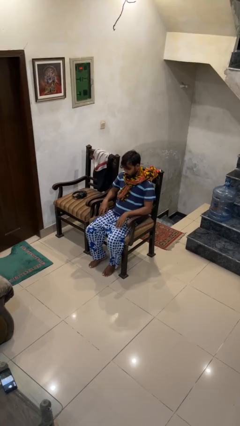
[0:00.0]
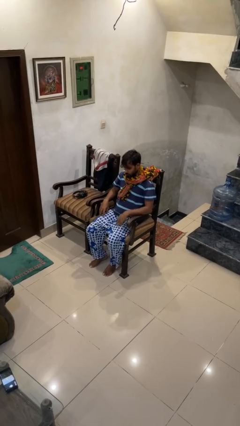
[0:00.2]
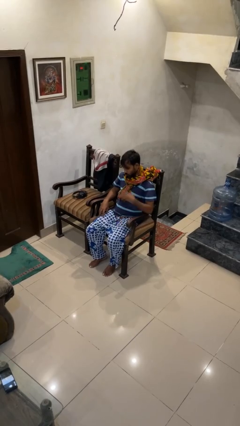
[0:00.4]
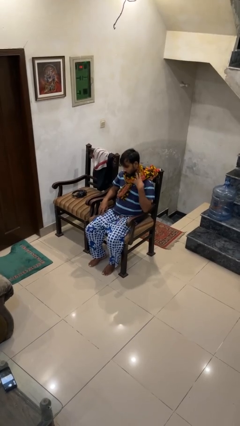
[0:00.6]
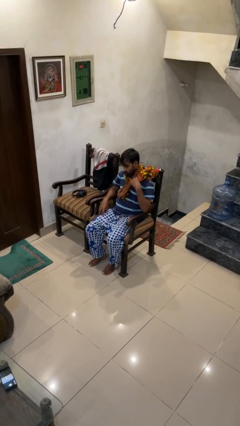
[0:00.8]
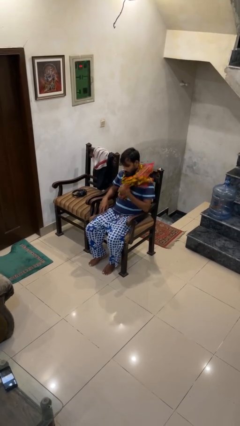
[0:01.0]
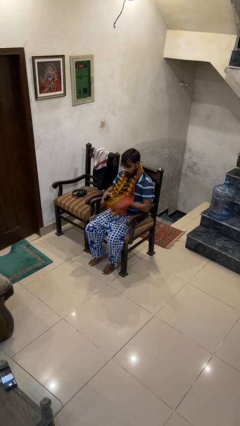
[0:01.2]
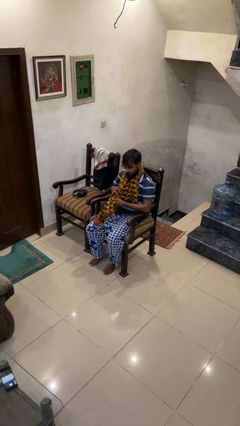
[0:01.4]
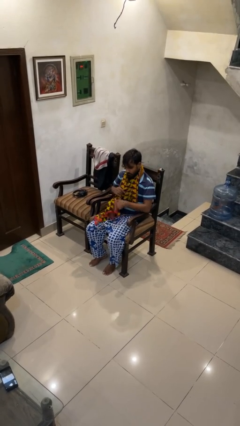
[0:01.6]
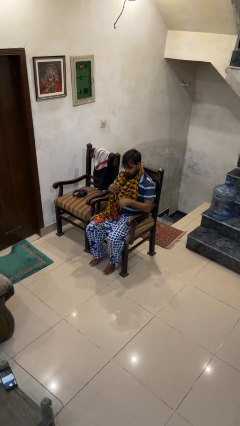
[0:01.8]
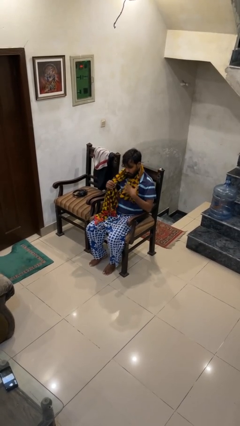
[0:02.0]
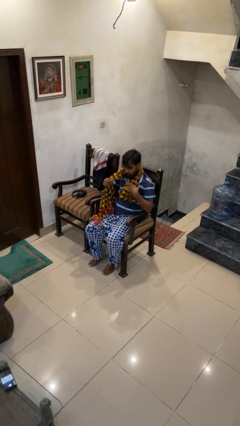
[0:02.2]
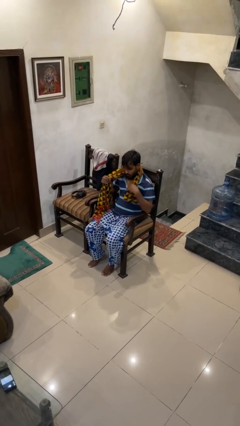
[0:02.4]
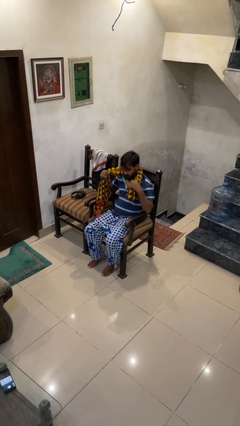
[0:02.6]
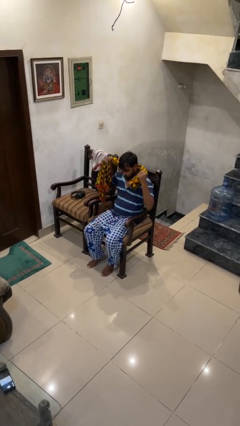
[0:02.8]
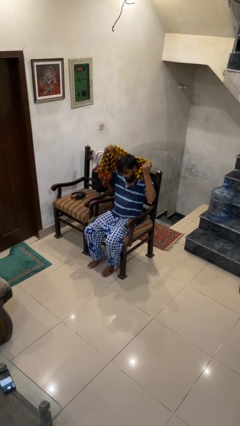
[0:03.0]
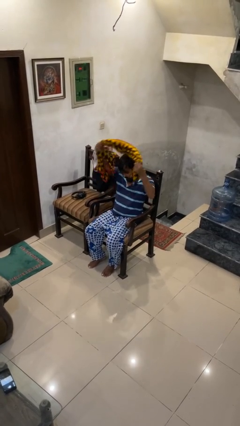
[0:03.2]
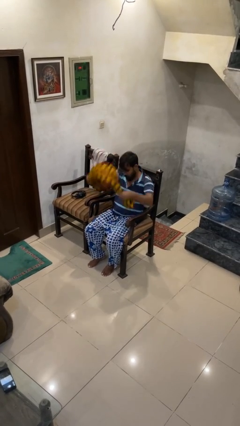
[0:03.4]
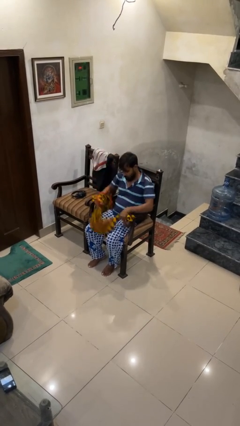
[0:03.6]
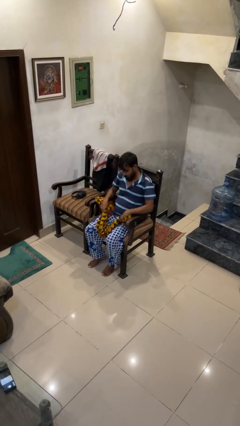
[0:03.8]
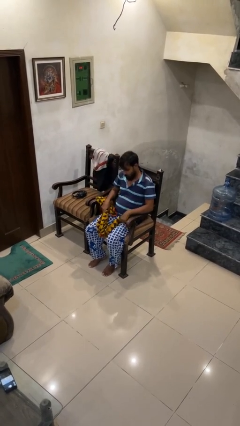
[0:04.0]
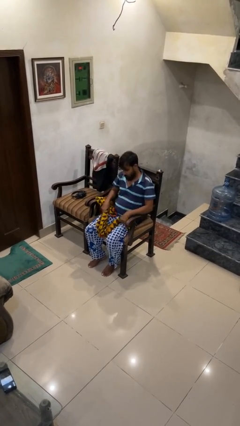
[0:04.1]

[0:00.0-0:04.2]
person takes off scarf

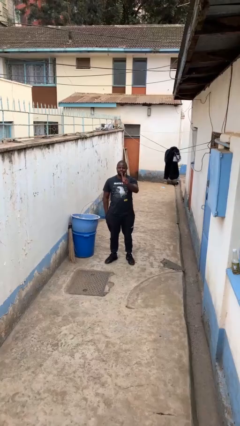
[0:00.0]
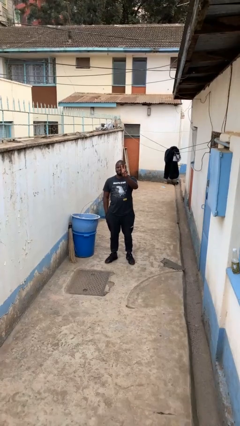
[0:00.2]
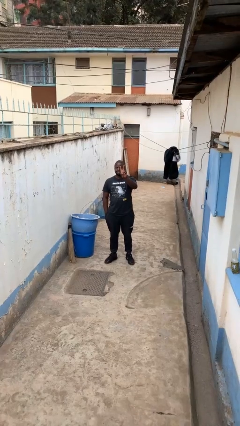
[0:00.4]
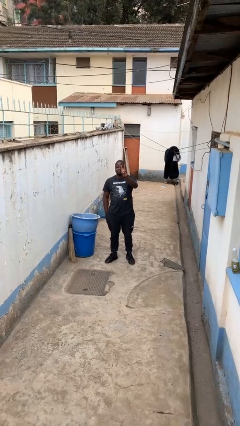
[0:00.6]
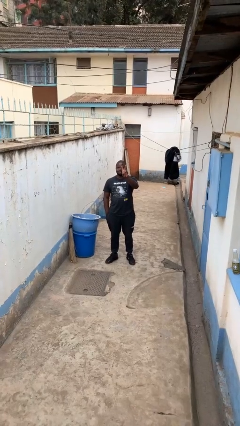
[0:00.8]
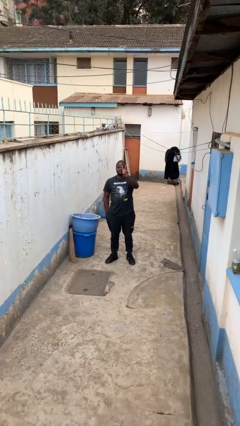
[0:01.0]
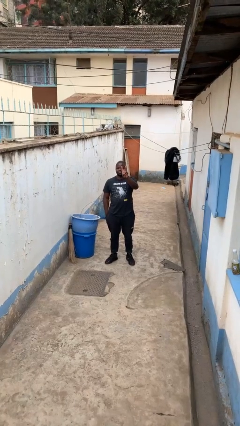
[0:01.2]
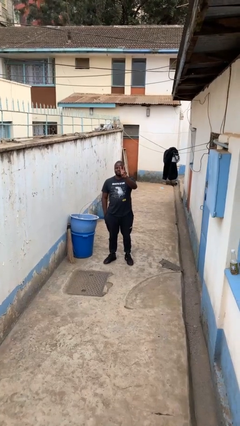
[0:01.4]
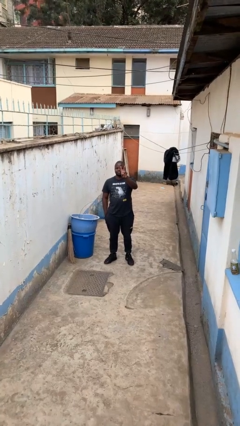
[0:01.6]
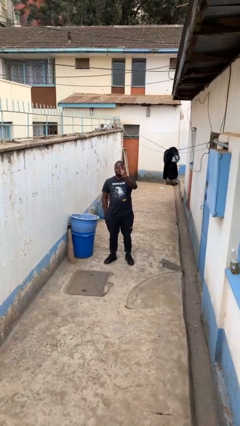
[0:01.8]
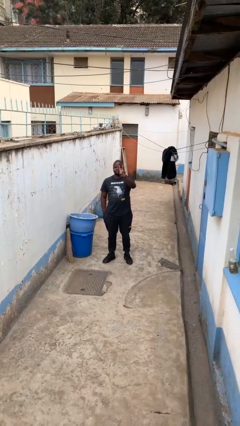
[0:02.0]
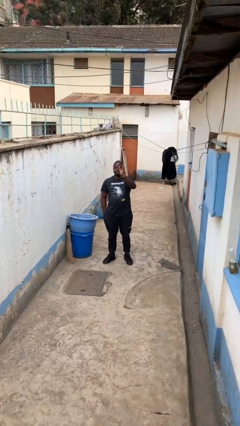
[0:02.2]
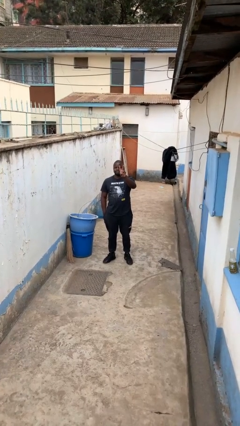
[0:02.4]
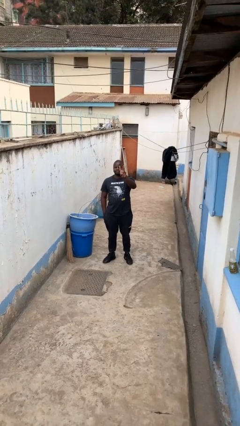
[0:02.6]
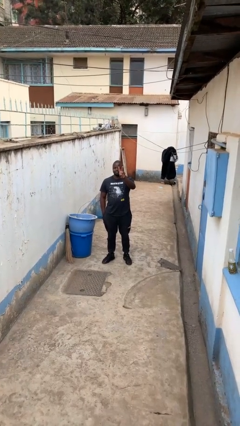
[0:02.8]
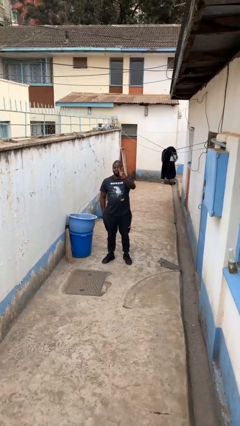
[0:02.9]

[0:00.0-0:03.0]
person gestures peace

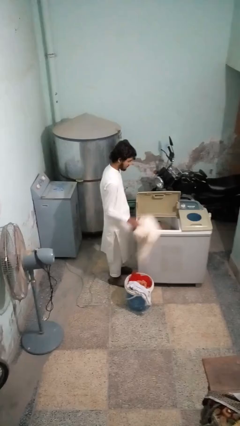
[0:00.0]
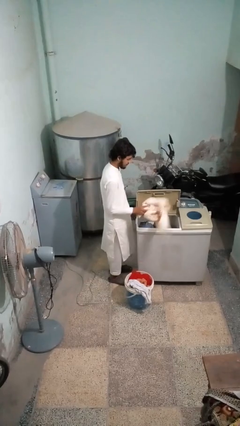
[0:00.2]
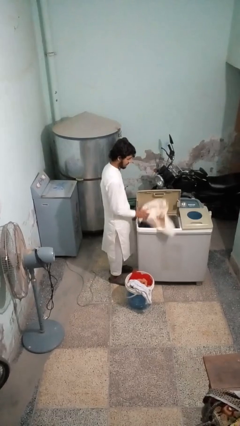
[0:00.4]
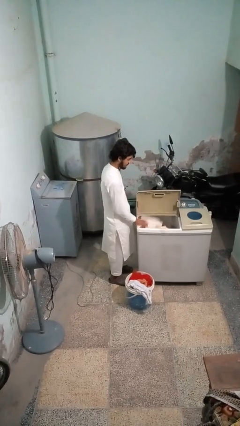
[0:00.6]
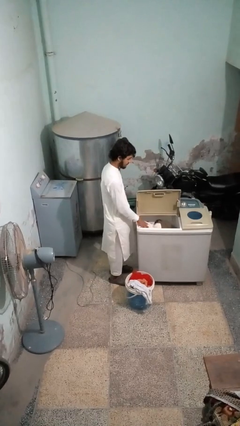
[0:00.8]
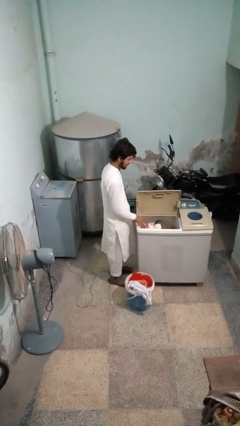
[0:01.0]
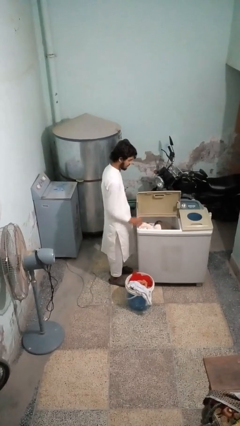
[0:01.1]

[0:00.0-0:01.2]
person loads clotheswasher

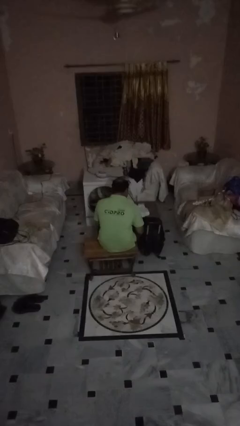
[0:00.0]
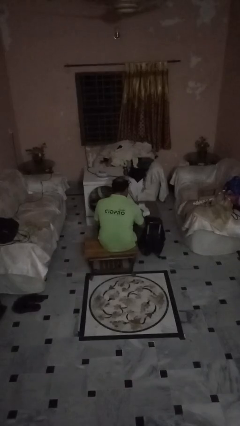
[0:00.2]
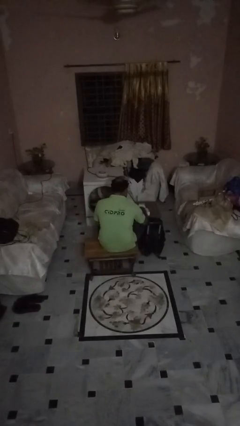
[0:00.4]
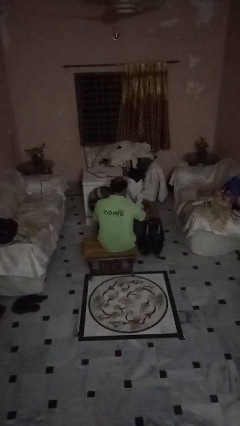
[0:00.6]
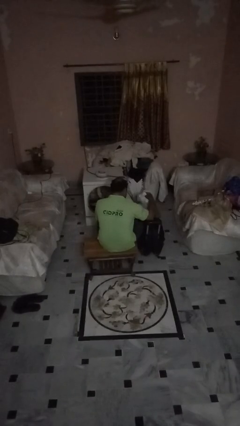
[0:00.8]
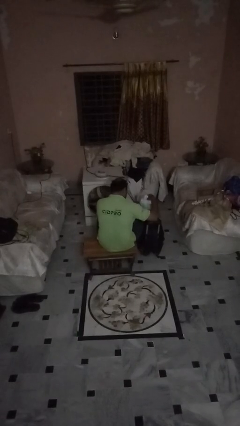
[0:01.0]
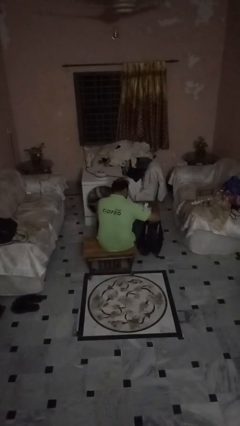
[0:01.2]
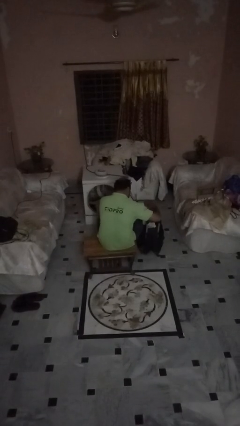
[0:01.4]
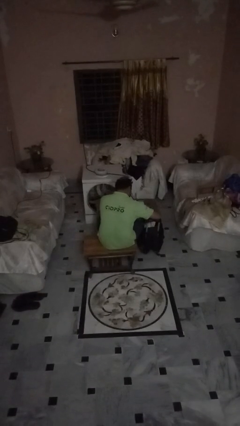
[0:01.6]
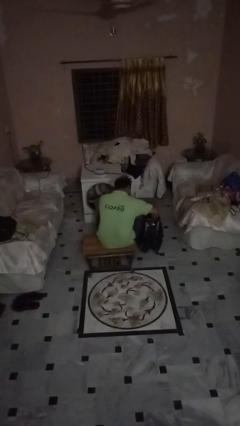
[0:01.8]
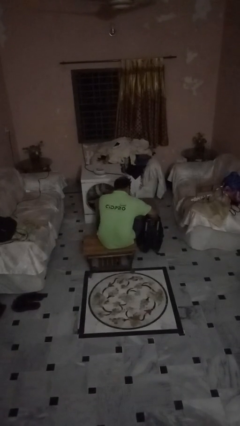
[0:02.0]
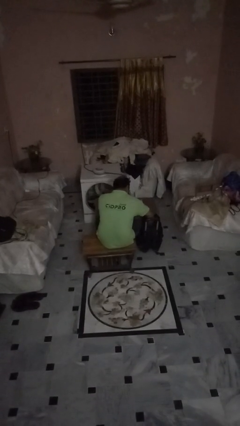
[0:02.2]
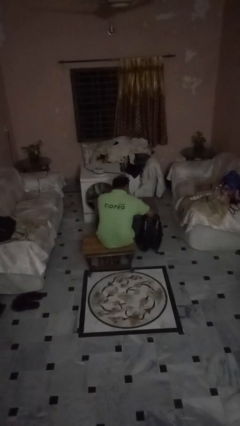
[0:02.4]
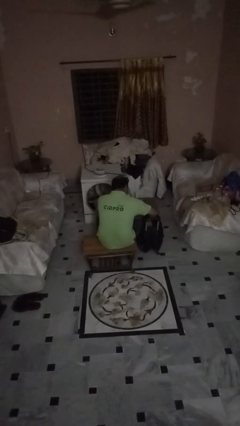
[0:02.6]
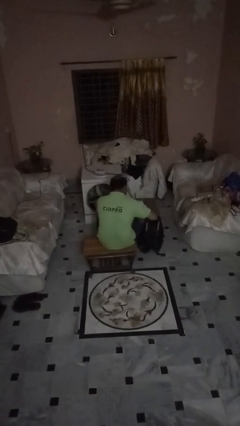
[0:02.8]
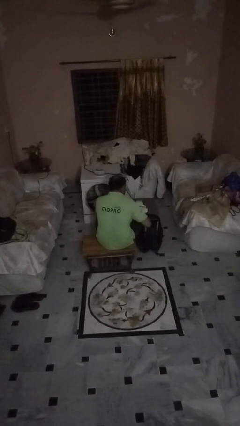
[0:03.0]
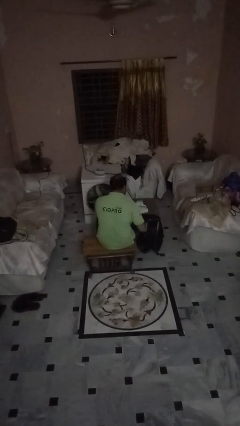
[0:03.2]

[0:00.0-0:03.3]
person loads clothes into suitcase

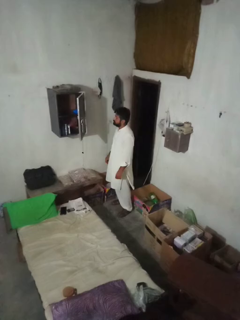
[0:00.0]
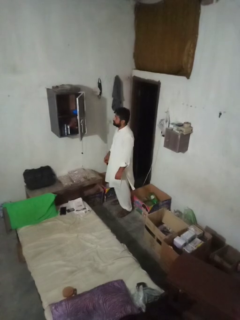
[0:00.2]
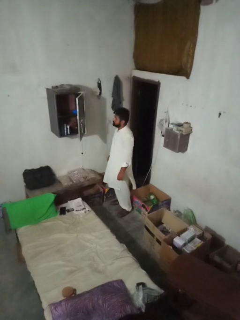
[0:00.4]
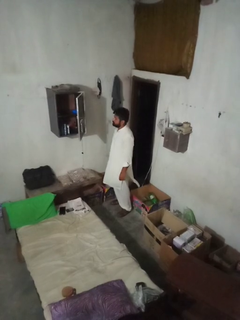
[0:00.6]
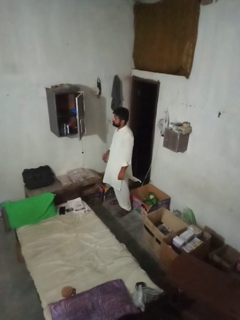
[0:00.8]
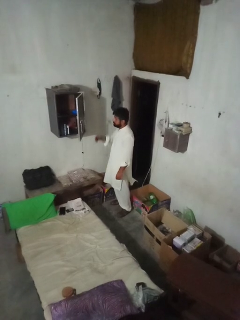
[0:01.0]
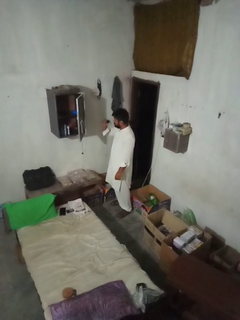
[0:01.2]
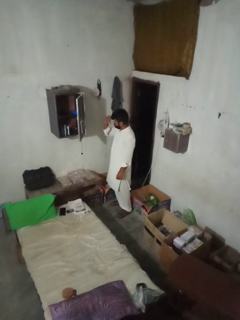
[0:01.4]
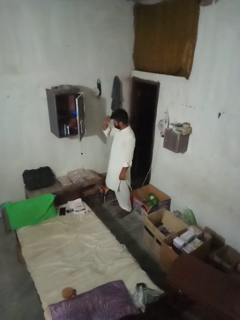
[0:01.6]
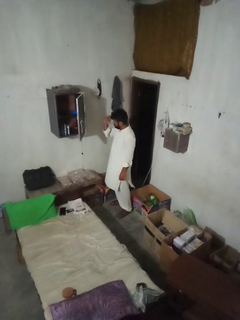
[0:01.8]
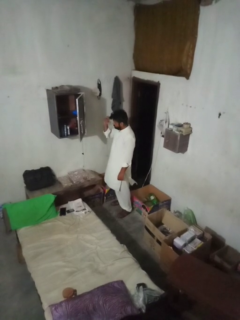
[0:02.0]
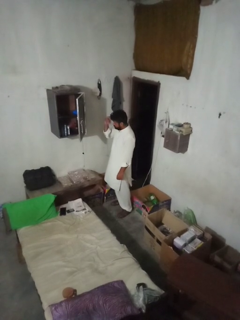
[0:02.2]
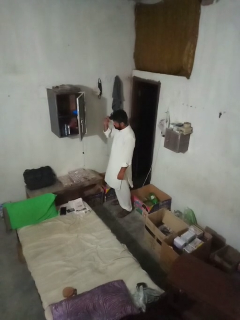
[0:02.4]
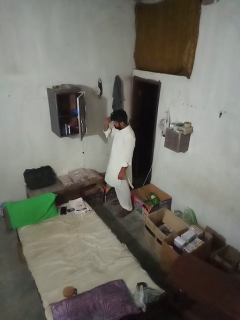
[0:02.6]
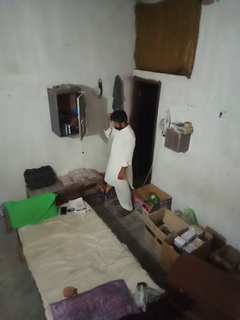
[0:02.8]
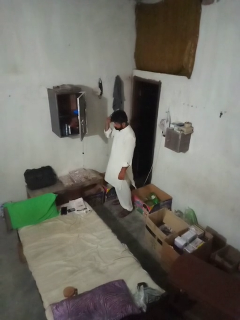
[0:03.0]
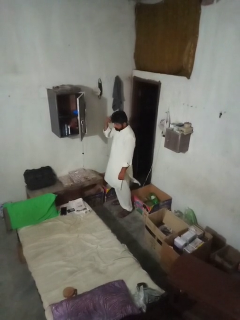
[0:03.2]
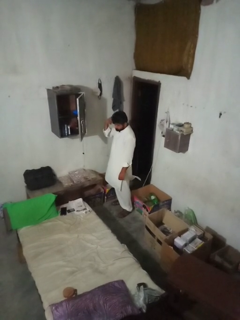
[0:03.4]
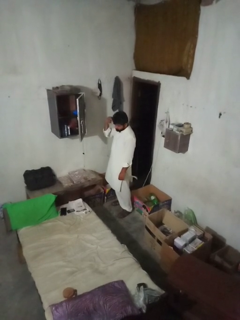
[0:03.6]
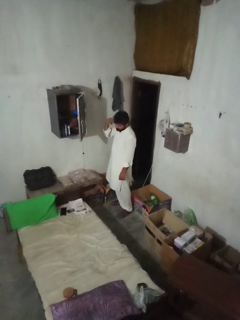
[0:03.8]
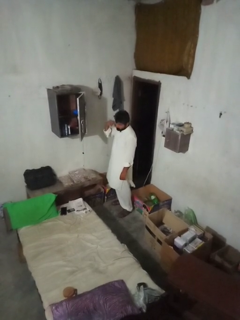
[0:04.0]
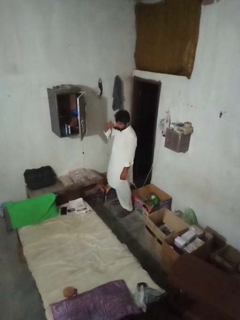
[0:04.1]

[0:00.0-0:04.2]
person applies foundation makeup

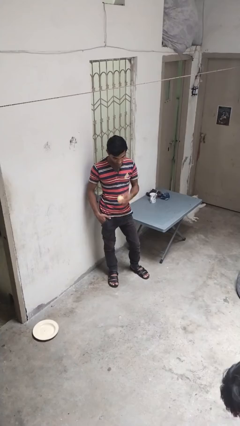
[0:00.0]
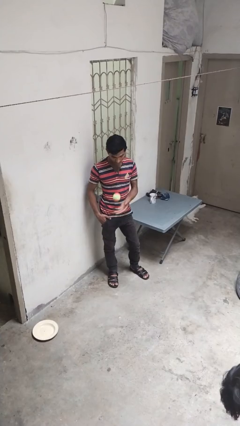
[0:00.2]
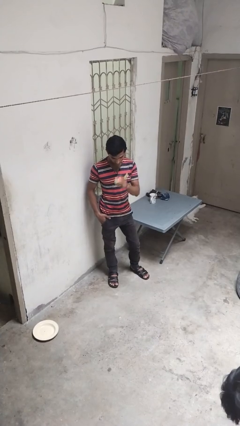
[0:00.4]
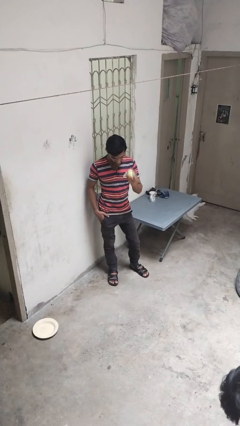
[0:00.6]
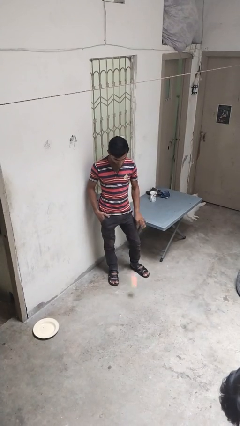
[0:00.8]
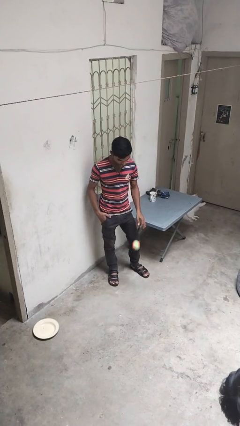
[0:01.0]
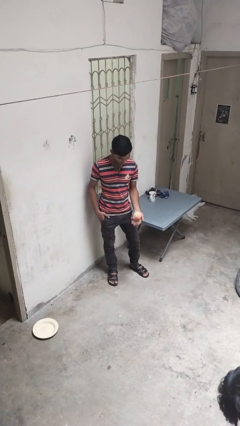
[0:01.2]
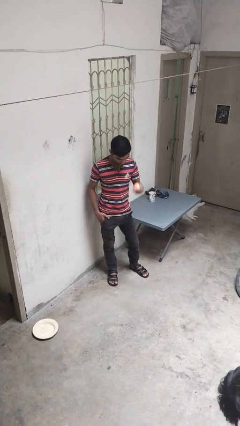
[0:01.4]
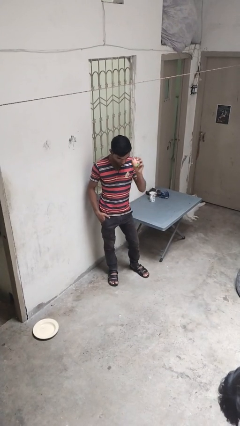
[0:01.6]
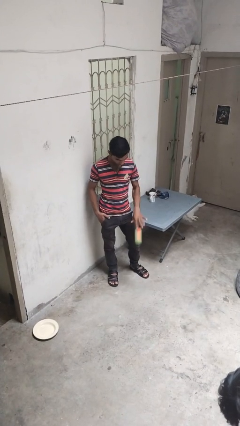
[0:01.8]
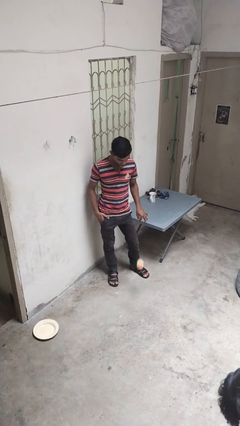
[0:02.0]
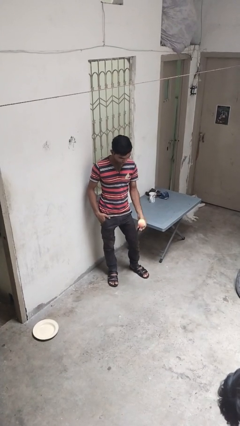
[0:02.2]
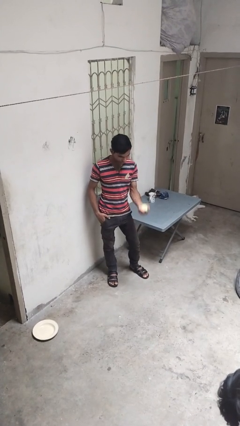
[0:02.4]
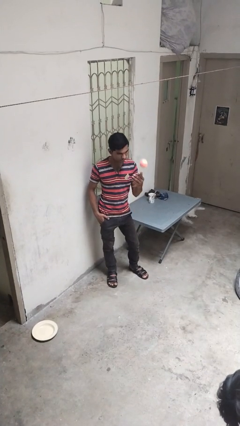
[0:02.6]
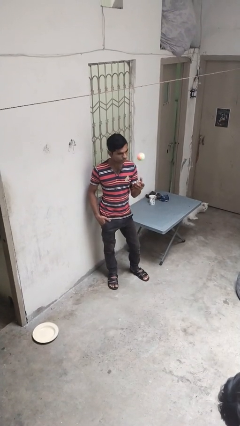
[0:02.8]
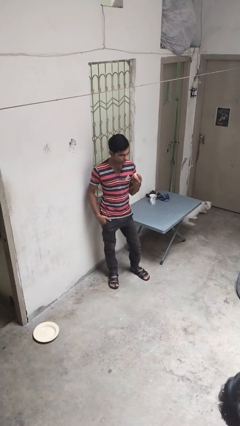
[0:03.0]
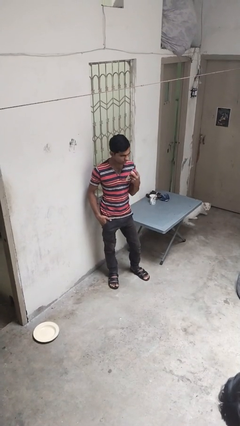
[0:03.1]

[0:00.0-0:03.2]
person bounces ball on floor
